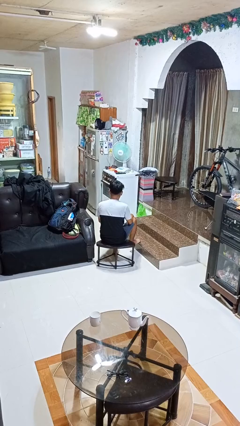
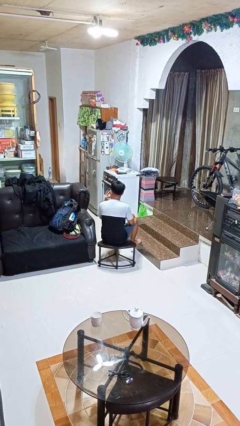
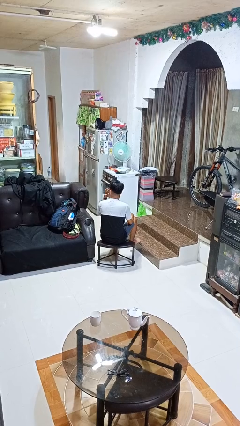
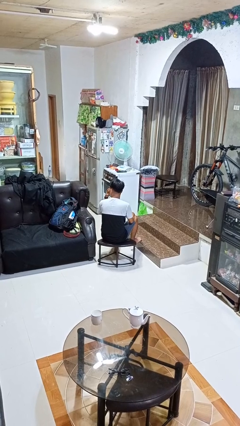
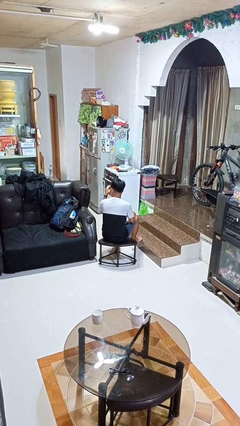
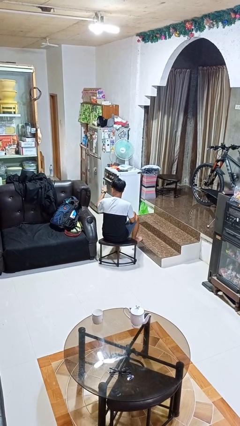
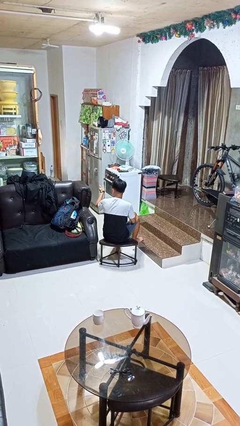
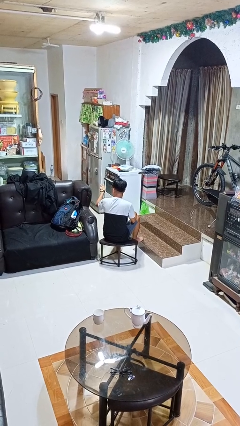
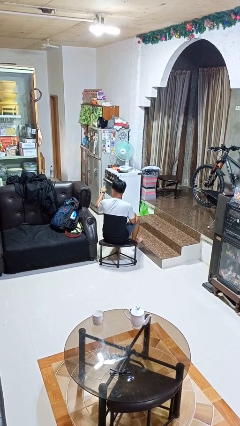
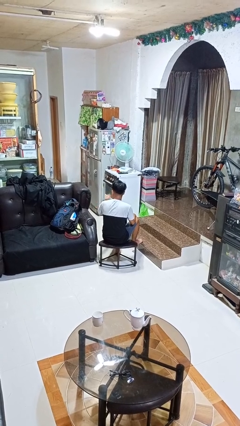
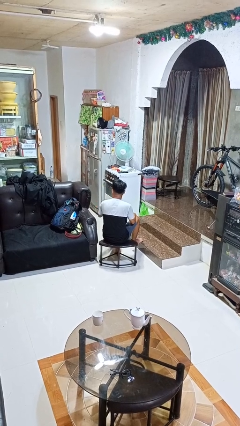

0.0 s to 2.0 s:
person gestures watch closely

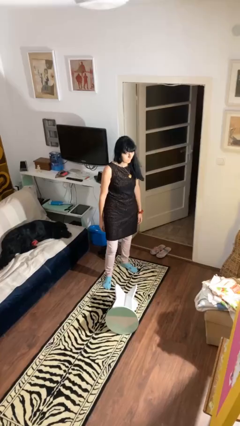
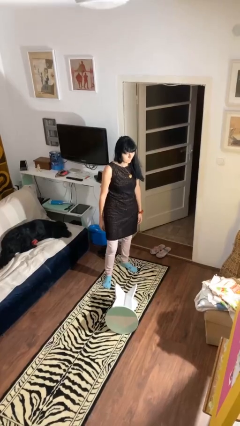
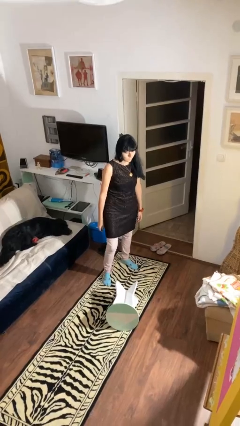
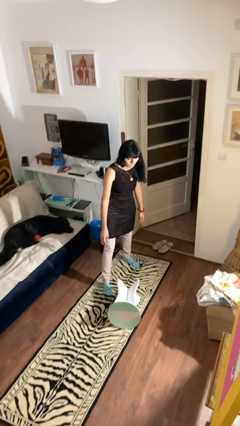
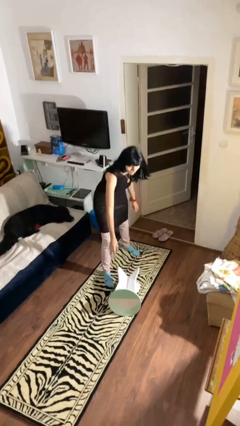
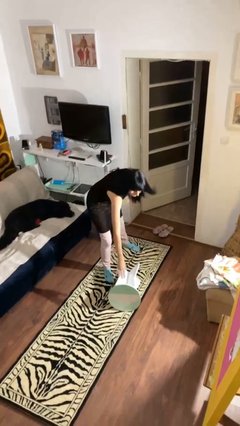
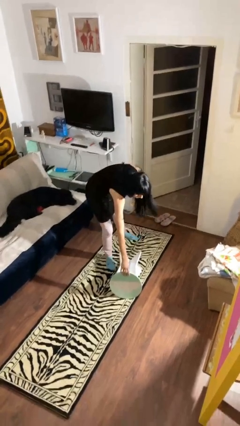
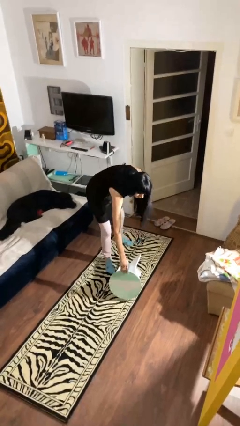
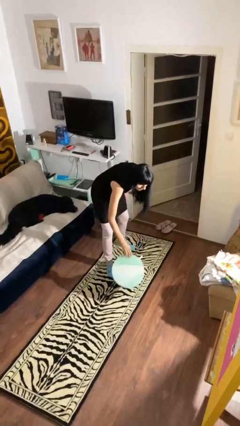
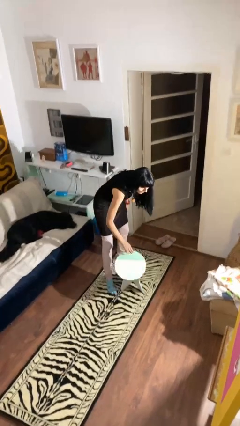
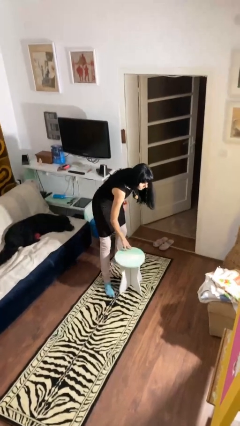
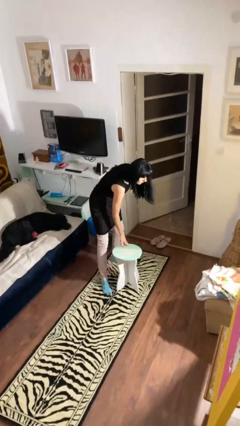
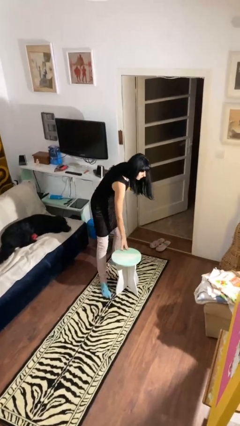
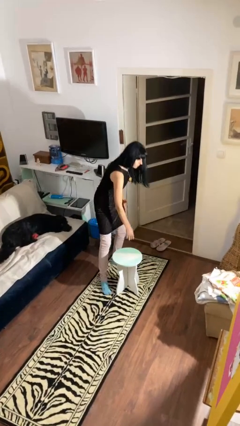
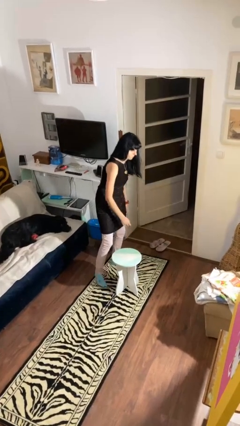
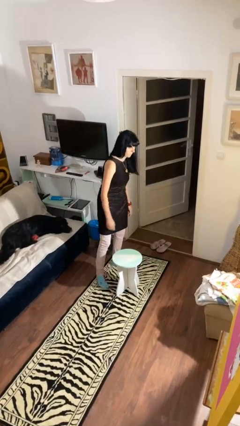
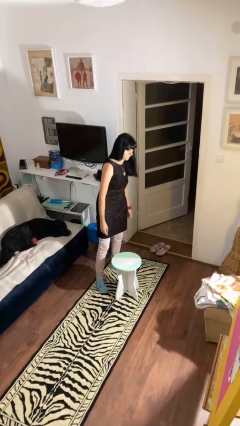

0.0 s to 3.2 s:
person sets upright furniture

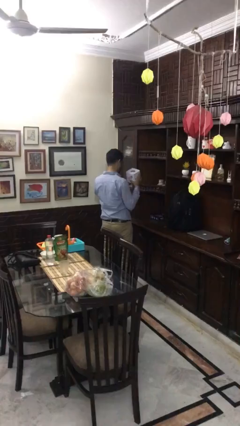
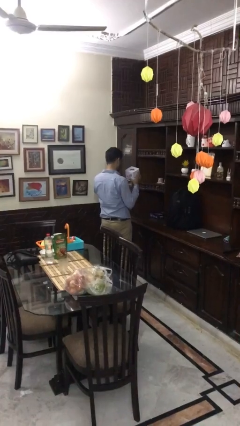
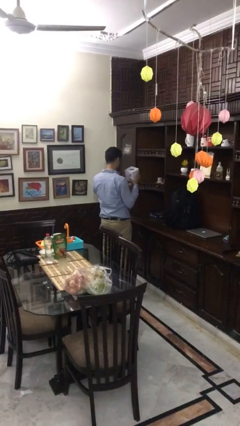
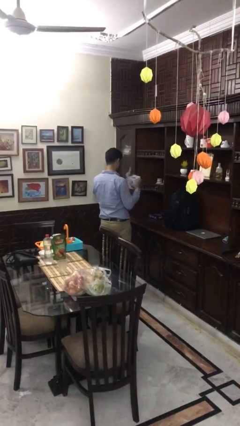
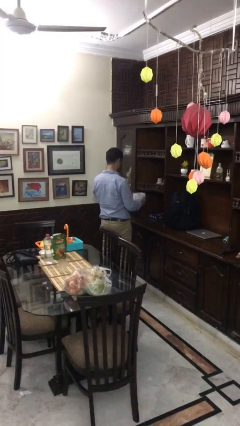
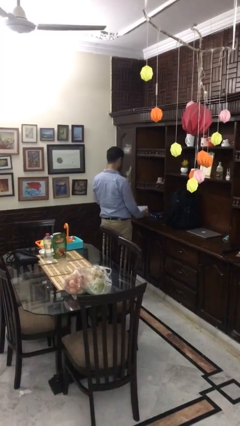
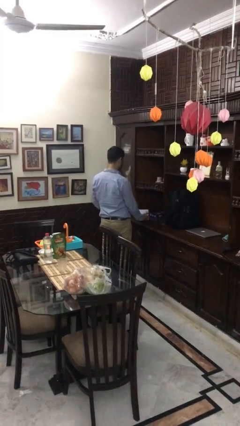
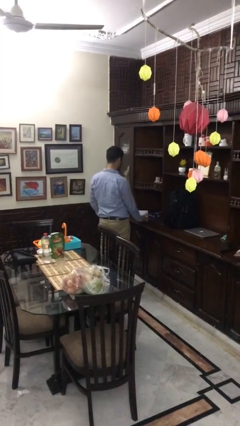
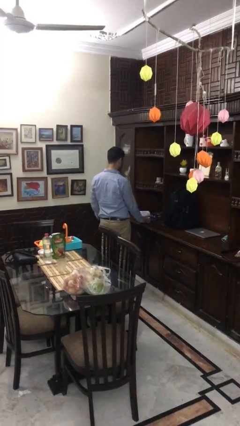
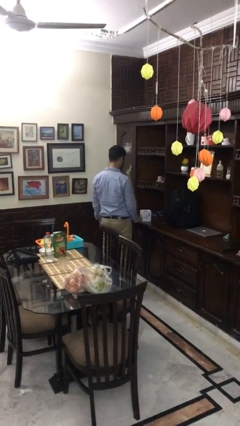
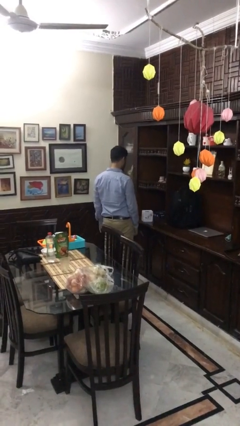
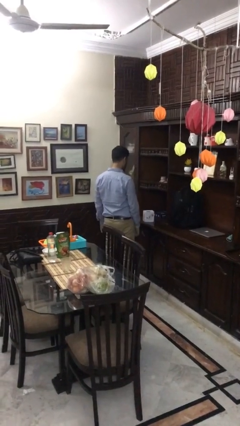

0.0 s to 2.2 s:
person puts down object on countertop

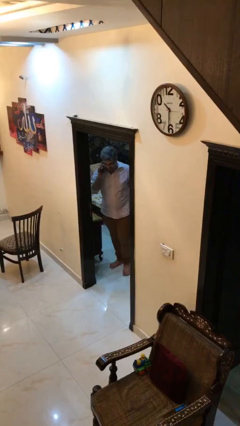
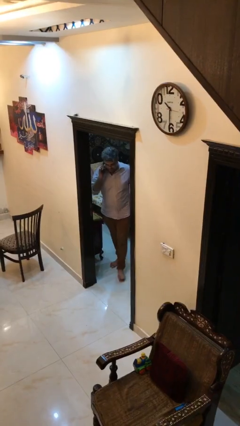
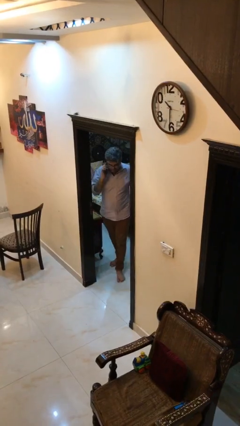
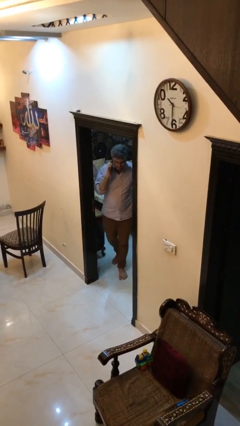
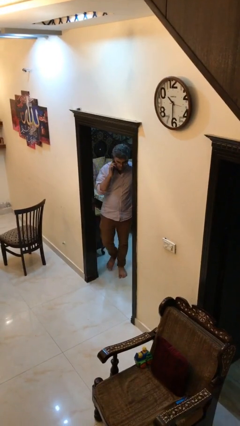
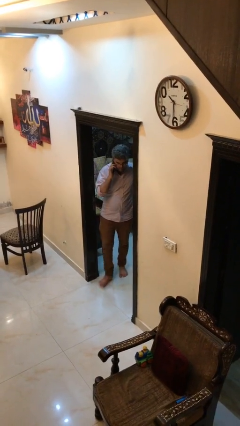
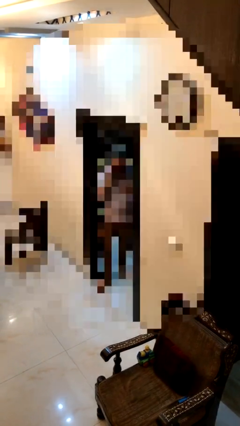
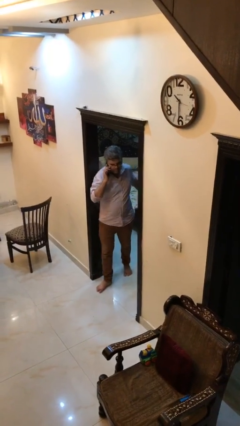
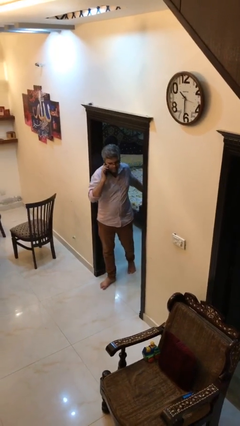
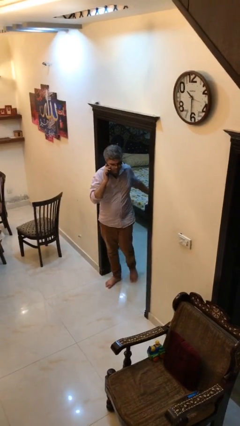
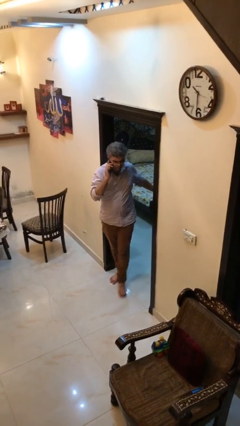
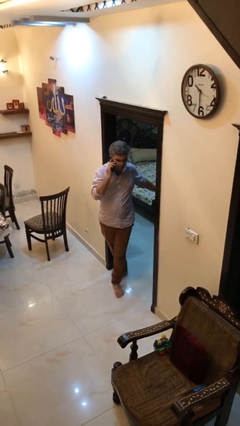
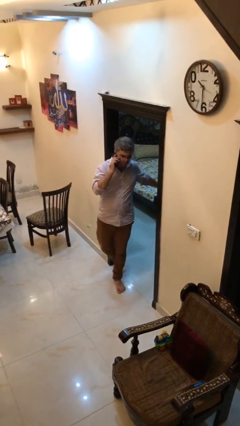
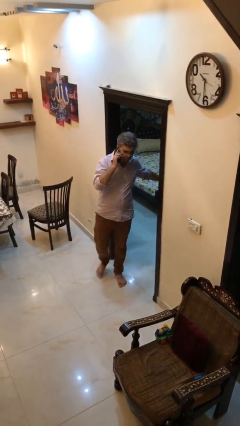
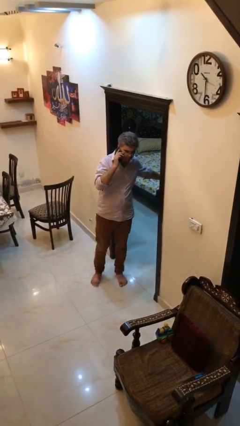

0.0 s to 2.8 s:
person enters scene through structure

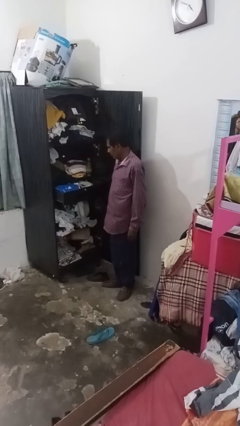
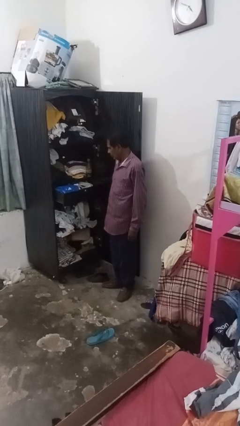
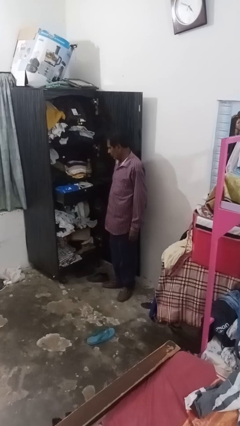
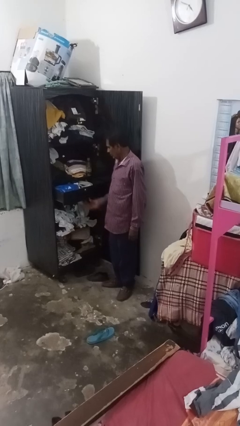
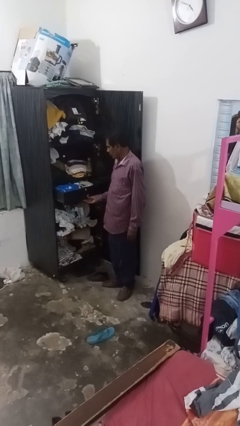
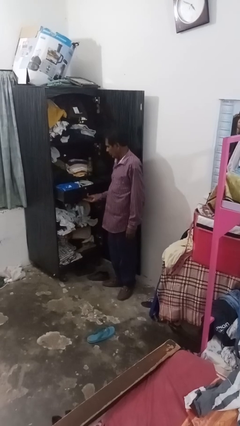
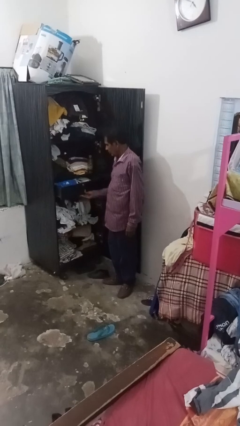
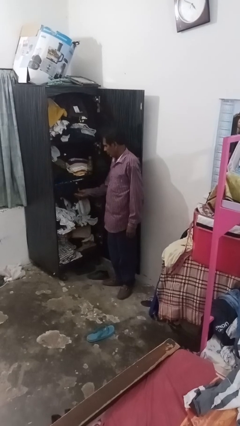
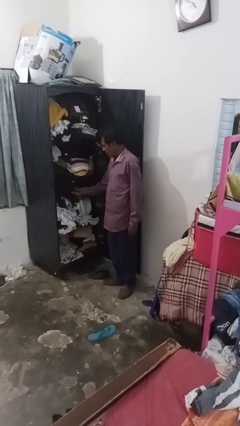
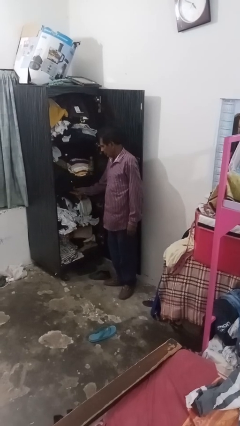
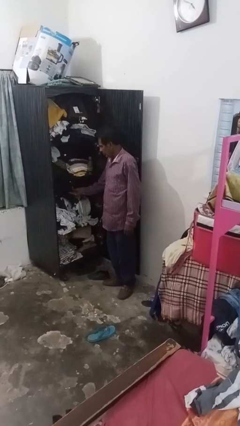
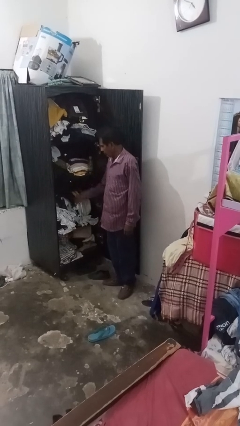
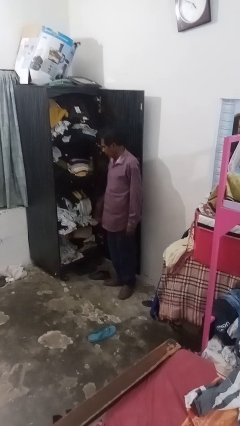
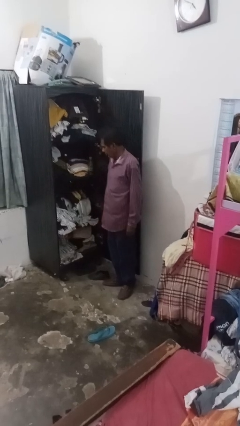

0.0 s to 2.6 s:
person closes dresser drawer

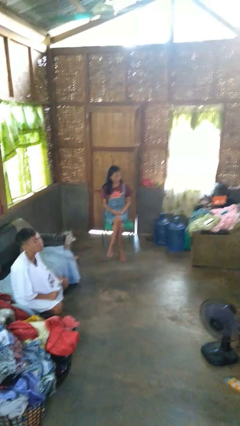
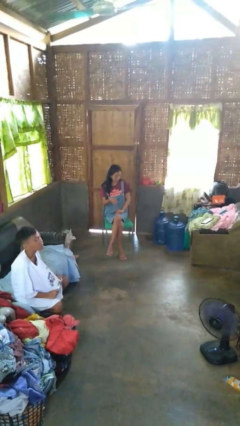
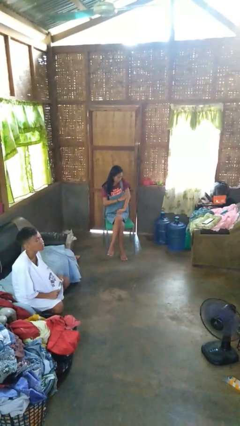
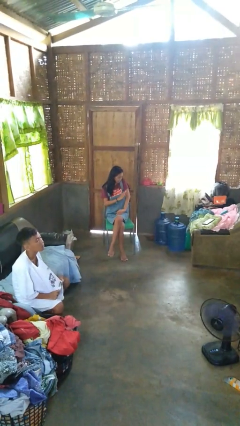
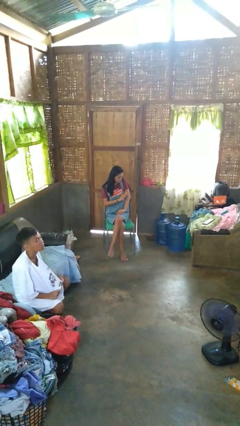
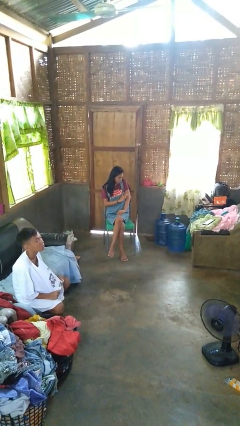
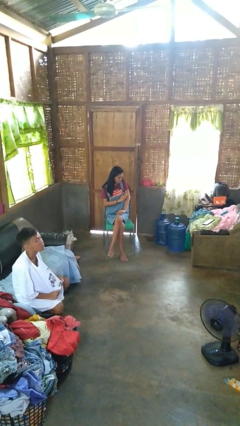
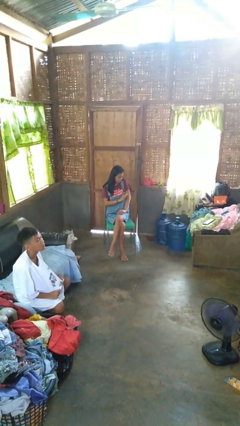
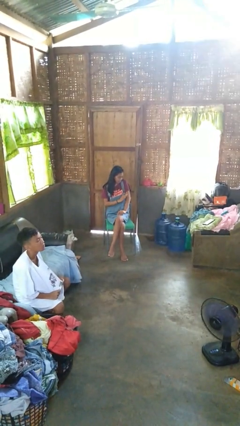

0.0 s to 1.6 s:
person swats bug

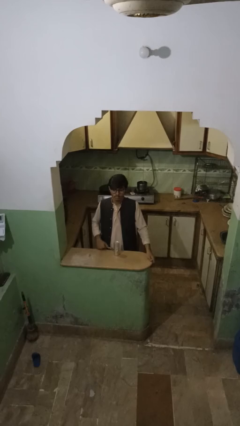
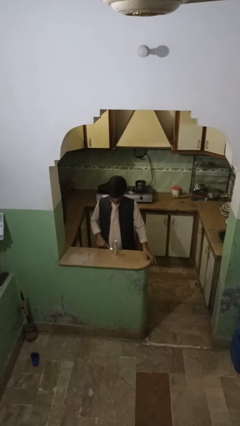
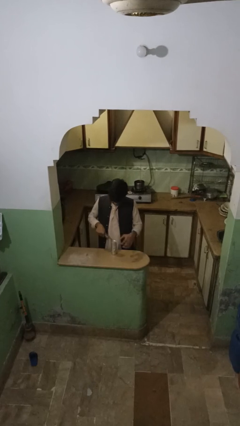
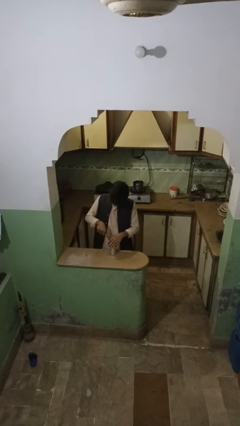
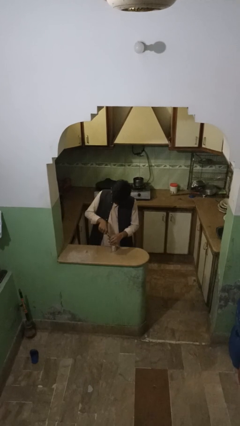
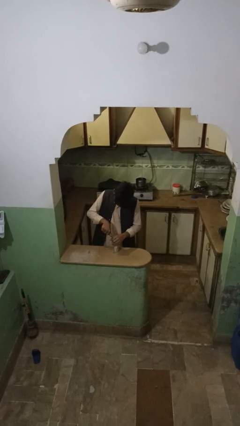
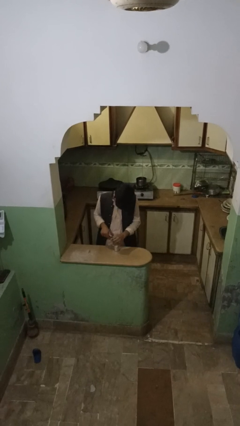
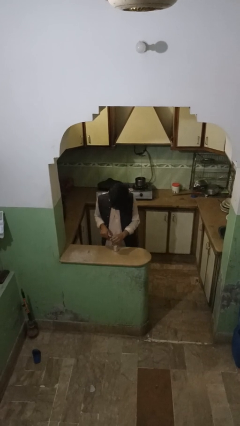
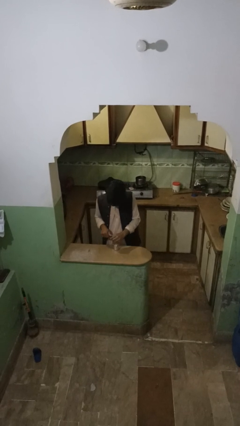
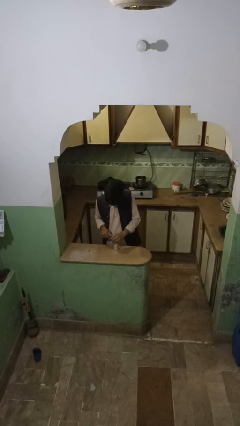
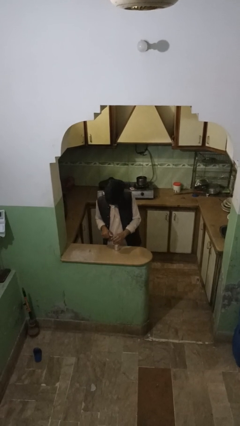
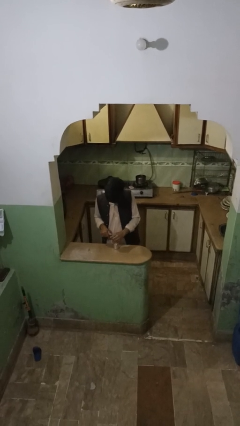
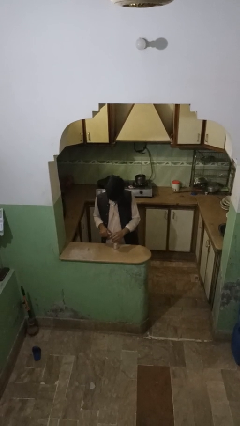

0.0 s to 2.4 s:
person opens can with can opener

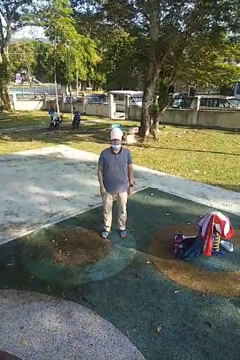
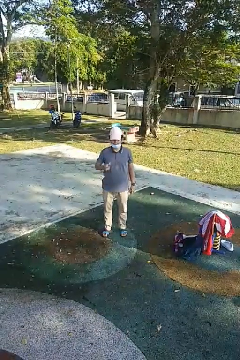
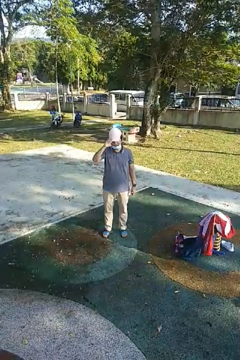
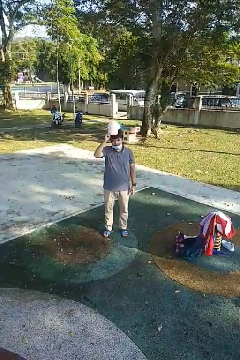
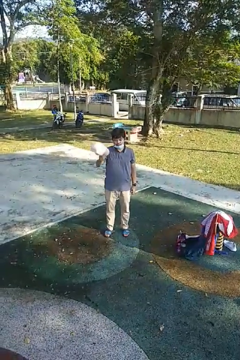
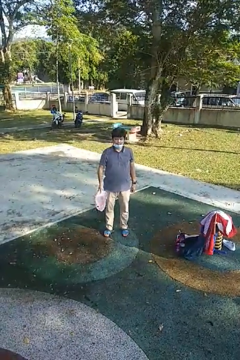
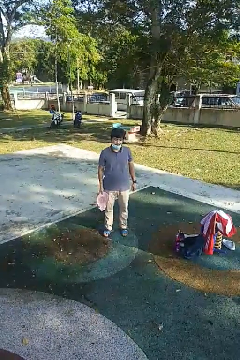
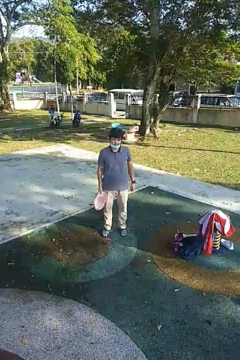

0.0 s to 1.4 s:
person takes off hat
